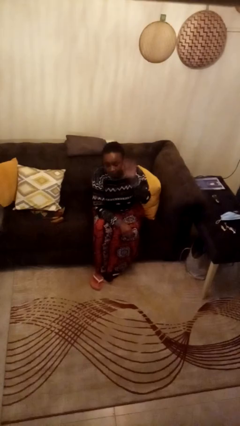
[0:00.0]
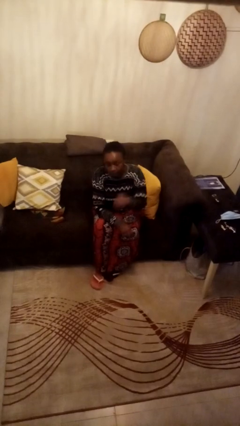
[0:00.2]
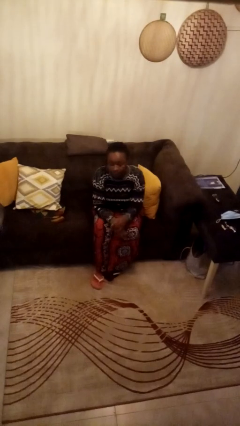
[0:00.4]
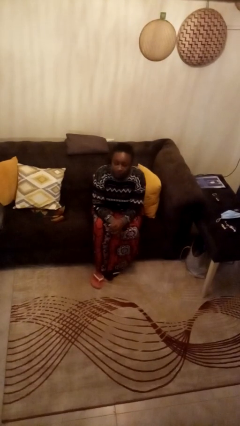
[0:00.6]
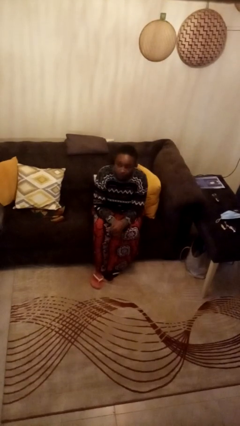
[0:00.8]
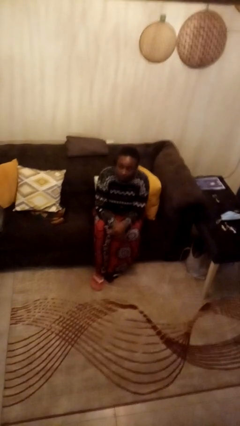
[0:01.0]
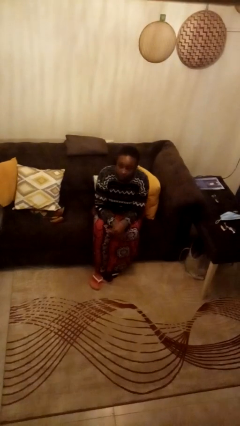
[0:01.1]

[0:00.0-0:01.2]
person gestures lower hand

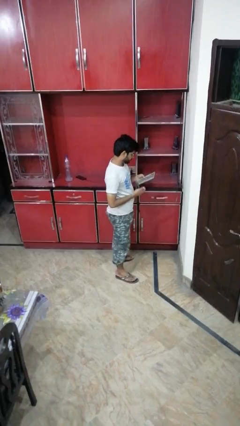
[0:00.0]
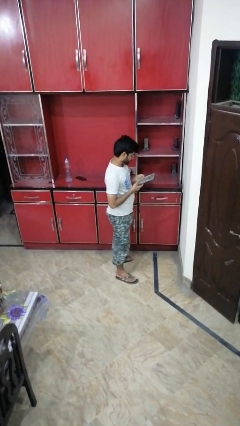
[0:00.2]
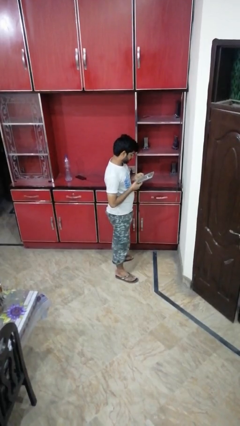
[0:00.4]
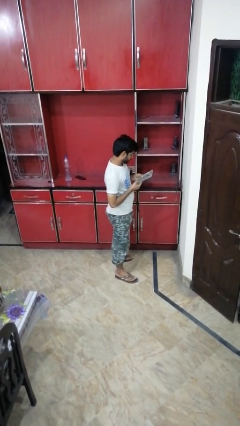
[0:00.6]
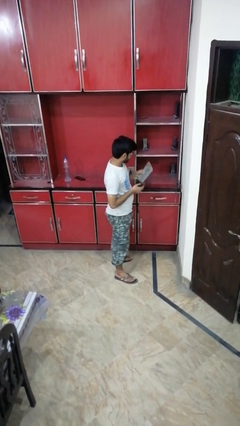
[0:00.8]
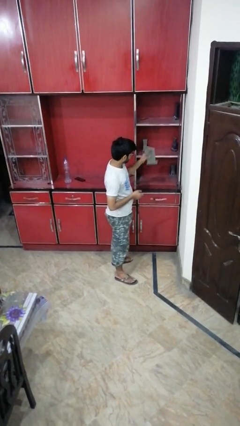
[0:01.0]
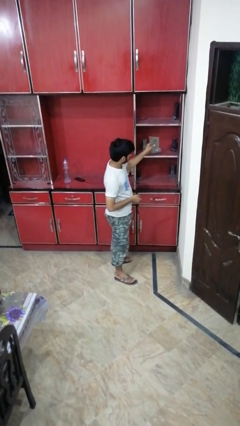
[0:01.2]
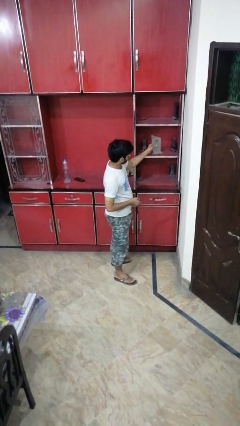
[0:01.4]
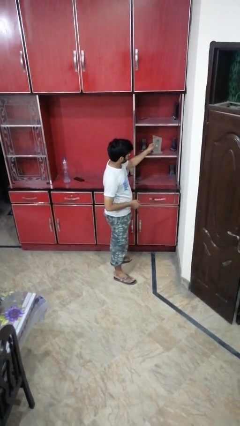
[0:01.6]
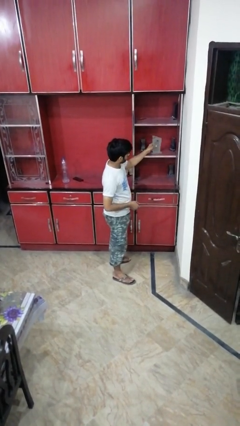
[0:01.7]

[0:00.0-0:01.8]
person puts down object into cabinet

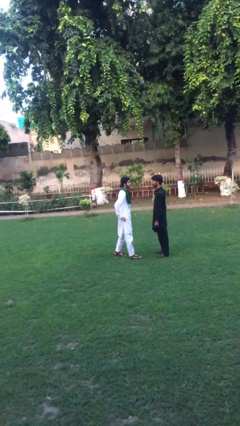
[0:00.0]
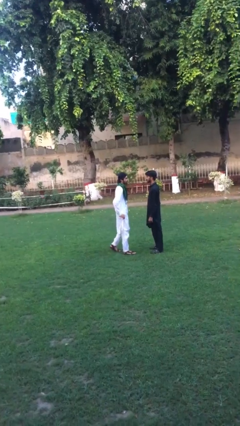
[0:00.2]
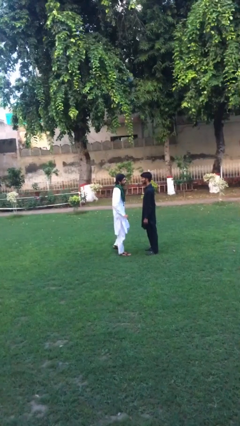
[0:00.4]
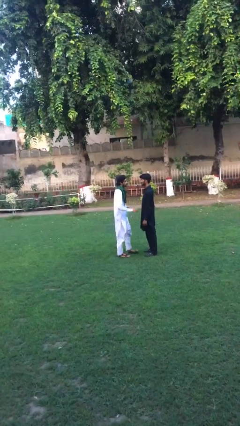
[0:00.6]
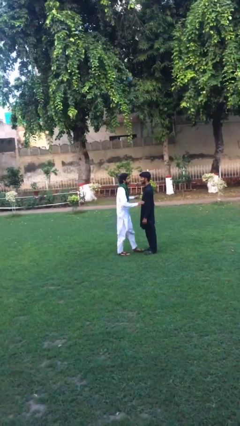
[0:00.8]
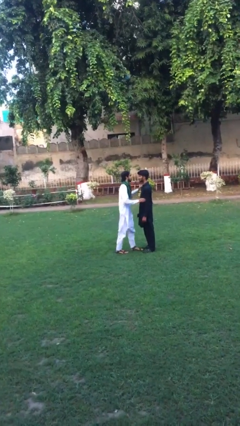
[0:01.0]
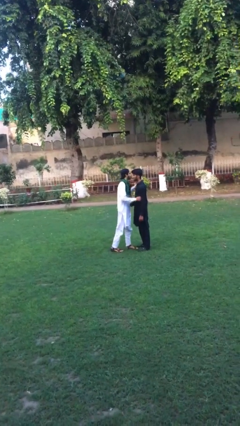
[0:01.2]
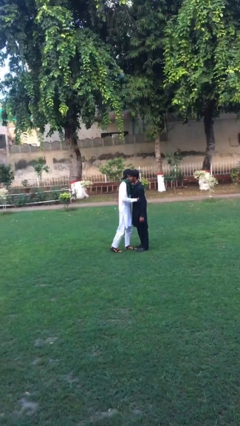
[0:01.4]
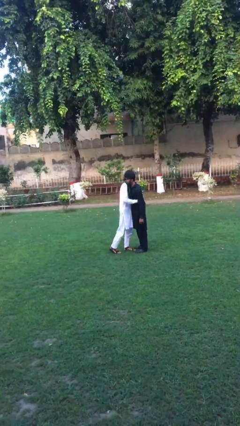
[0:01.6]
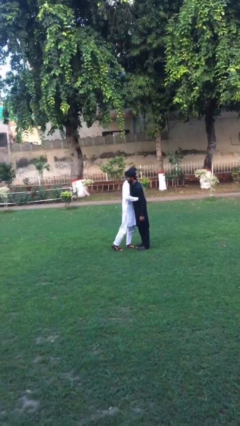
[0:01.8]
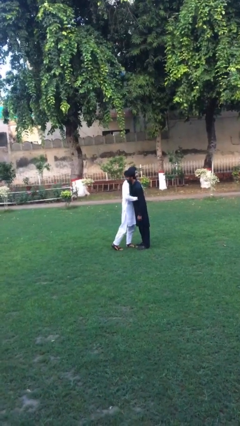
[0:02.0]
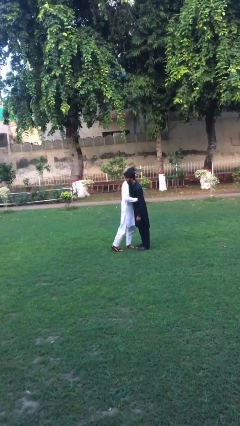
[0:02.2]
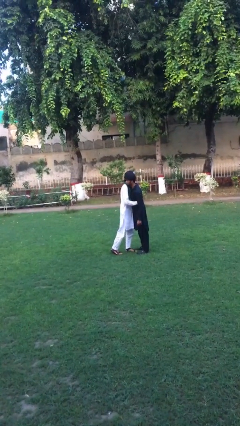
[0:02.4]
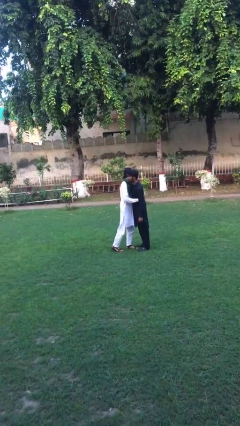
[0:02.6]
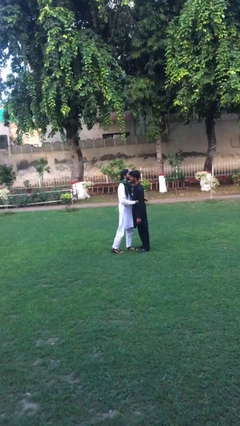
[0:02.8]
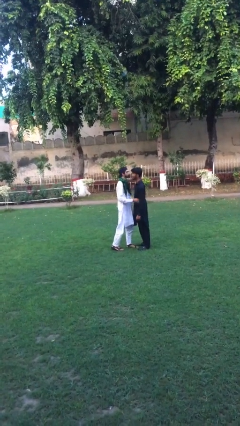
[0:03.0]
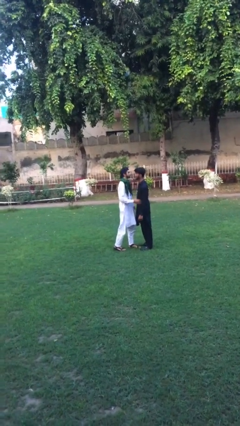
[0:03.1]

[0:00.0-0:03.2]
person embraces person

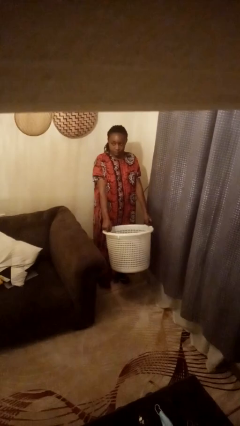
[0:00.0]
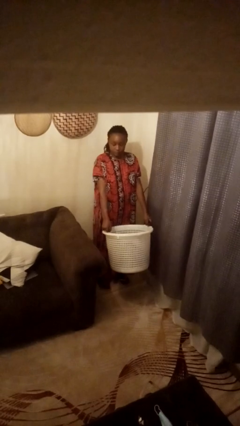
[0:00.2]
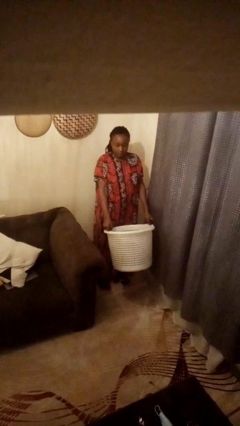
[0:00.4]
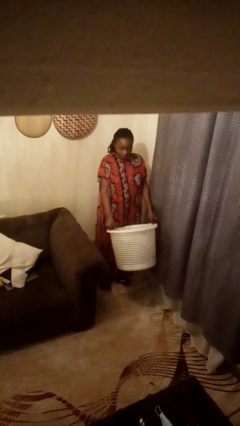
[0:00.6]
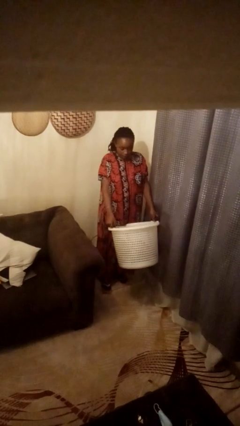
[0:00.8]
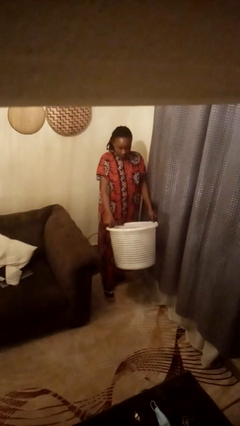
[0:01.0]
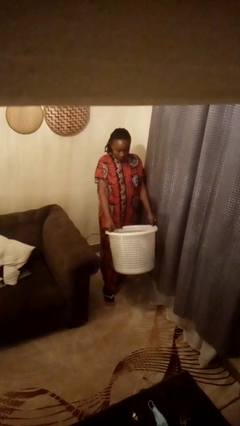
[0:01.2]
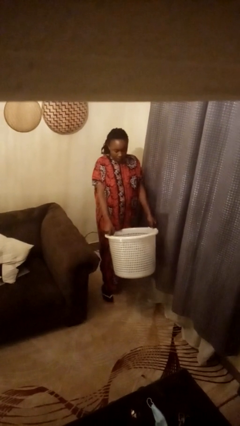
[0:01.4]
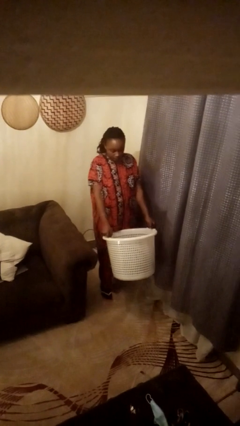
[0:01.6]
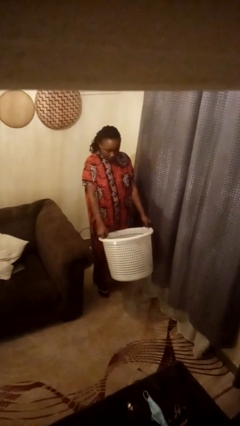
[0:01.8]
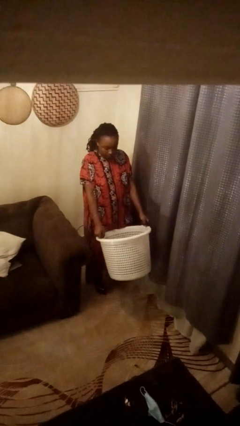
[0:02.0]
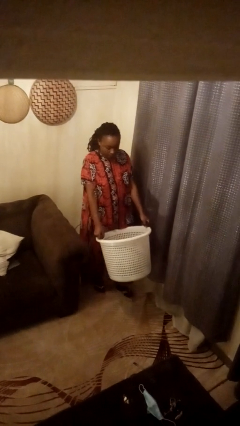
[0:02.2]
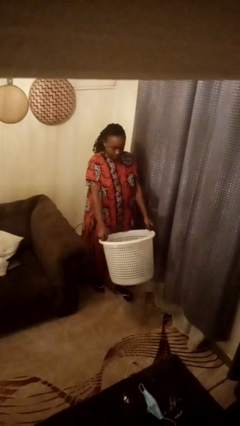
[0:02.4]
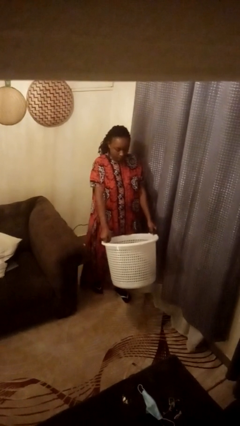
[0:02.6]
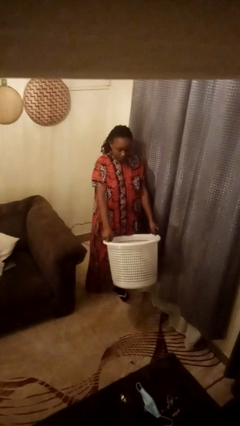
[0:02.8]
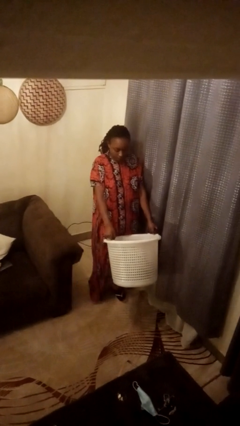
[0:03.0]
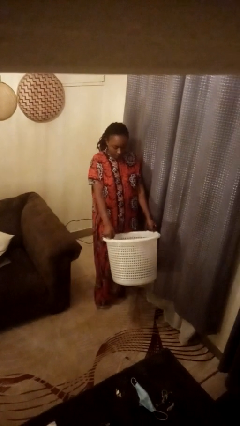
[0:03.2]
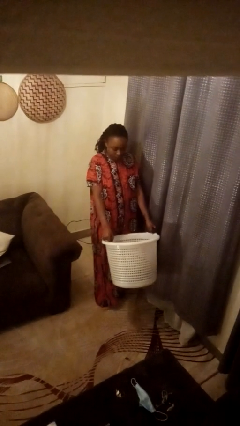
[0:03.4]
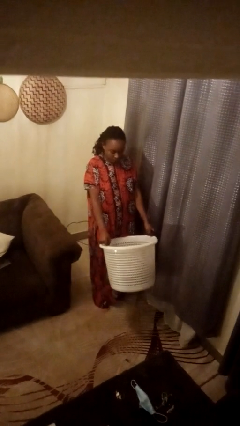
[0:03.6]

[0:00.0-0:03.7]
person carries laundry basket

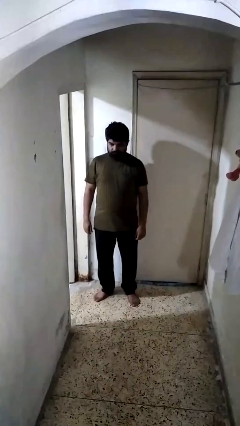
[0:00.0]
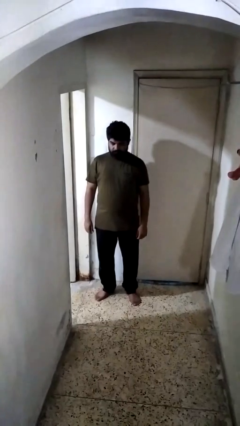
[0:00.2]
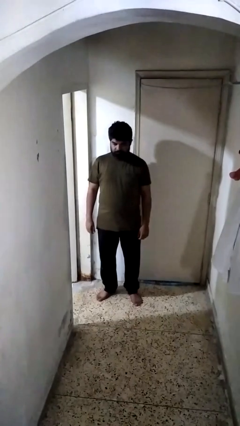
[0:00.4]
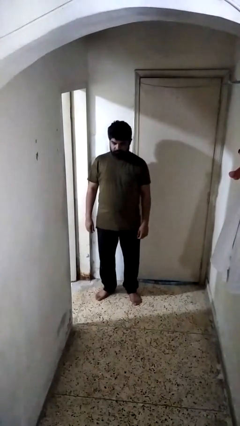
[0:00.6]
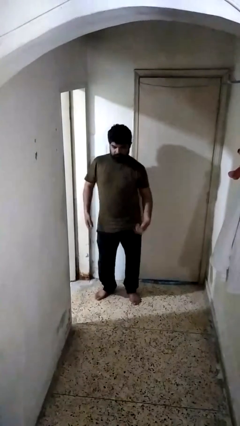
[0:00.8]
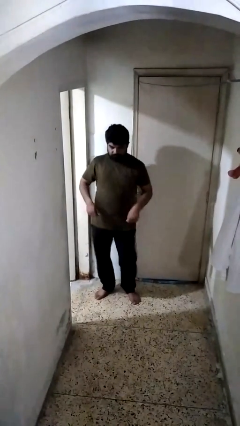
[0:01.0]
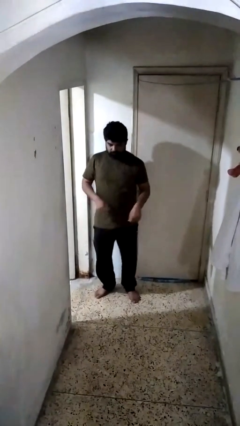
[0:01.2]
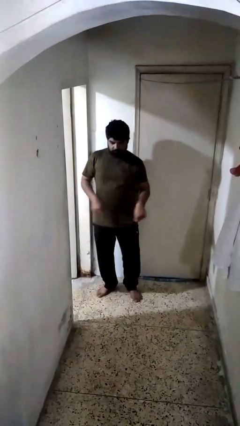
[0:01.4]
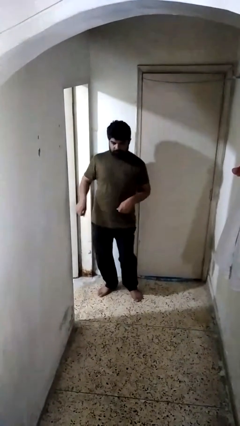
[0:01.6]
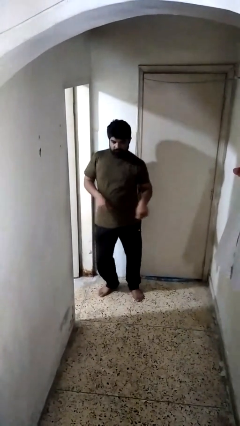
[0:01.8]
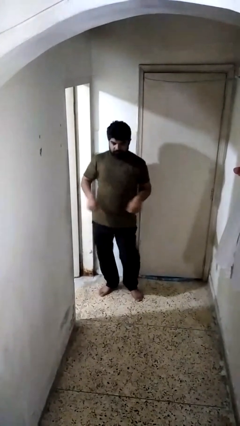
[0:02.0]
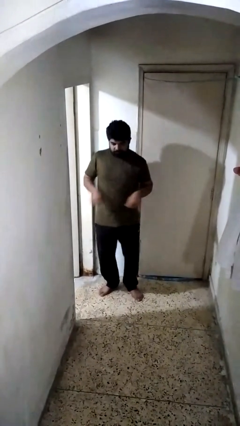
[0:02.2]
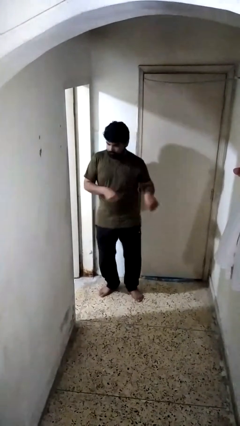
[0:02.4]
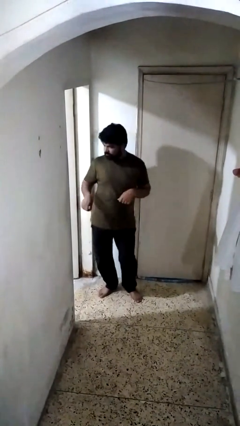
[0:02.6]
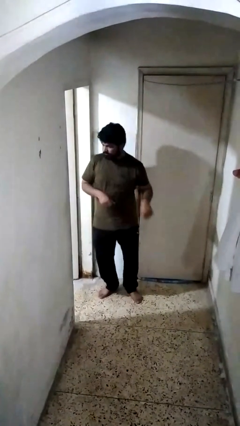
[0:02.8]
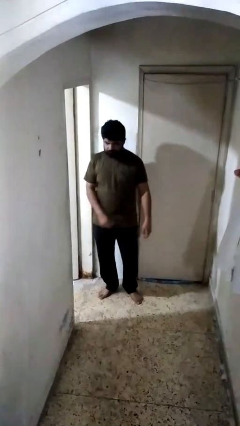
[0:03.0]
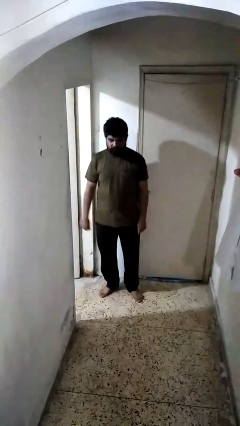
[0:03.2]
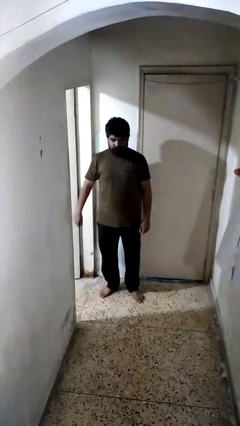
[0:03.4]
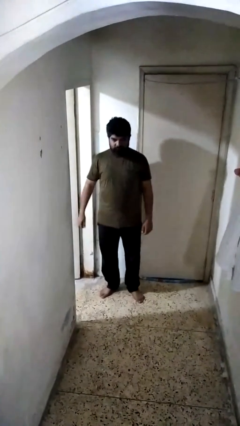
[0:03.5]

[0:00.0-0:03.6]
person dances in place

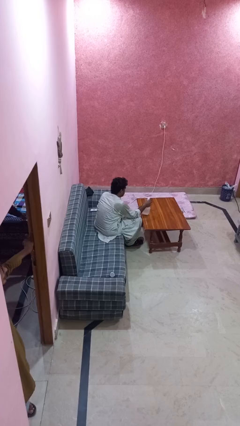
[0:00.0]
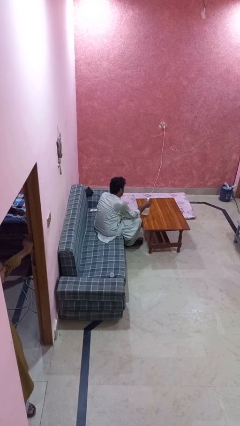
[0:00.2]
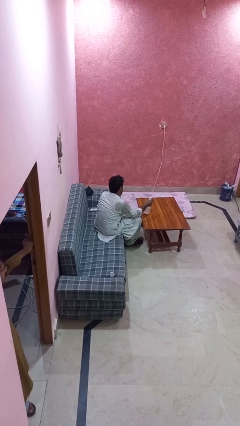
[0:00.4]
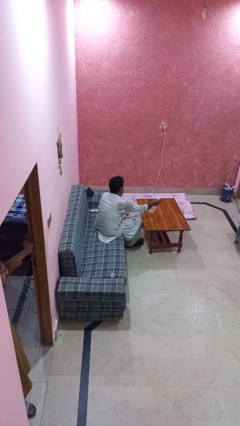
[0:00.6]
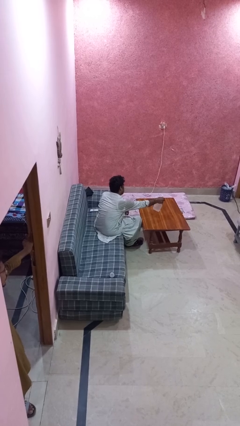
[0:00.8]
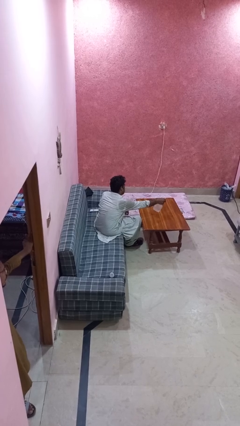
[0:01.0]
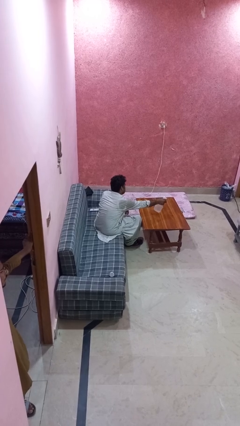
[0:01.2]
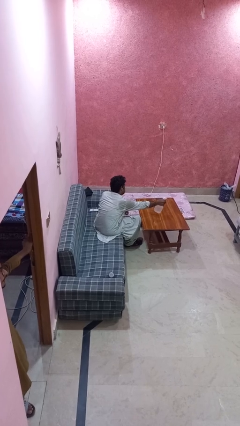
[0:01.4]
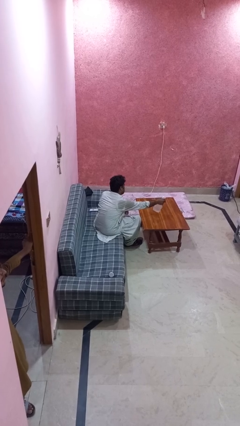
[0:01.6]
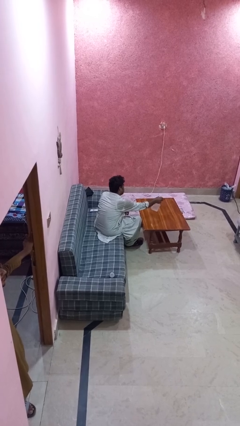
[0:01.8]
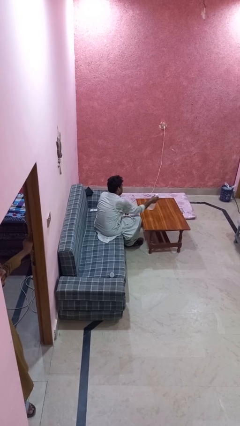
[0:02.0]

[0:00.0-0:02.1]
person sprays from bottle

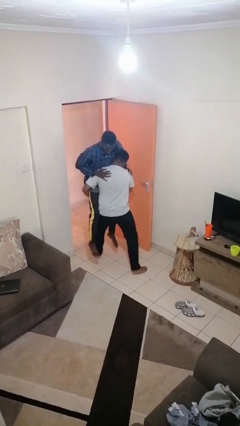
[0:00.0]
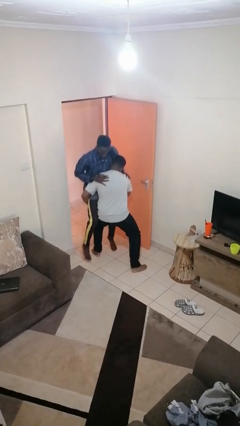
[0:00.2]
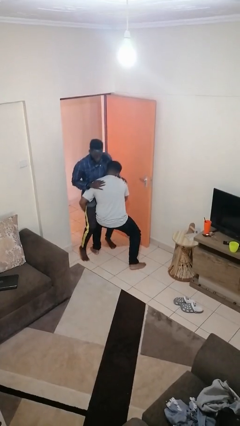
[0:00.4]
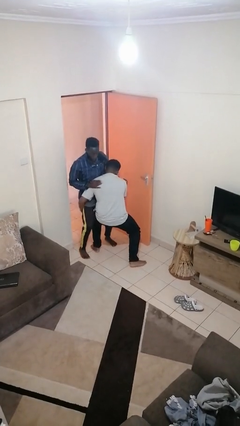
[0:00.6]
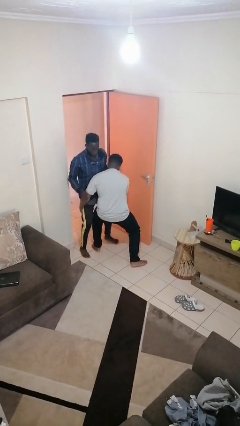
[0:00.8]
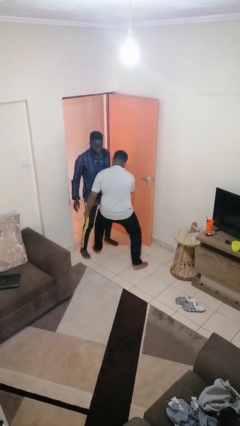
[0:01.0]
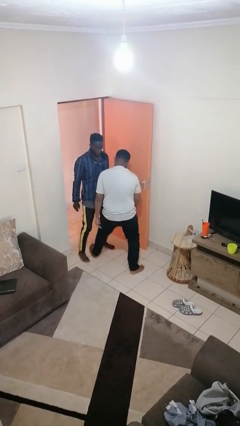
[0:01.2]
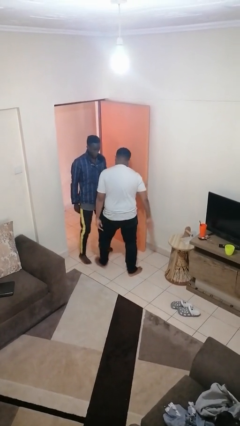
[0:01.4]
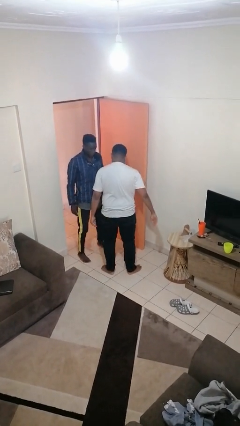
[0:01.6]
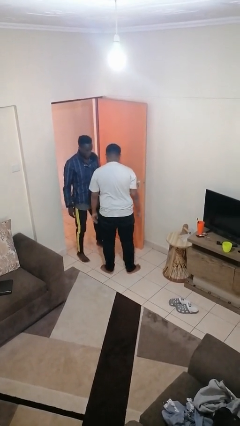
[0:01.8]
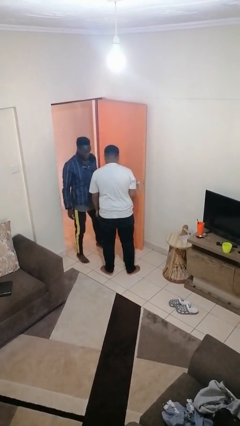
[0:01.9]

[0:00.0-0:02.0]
person puts down person
